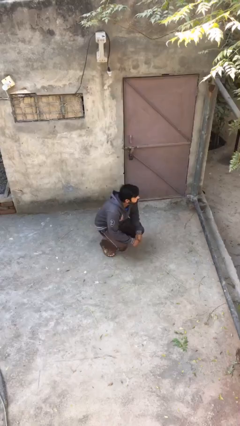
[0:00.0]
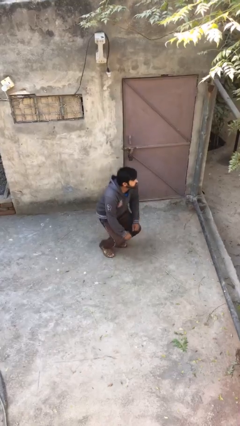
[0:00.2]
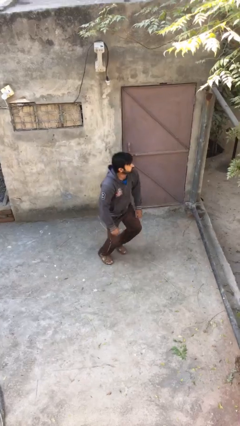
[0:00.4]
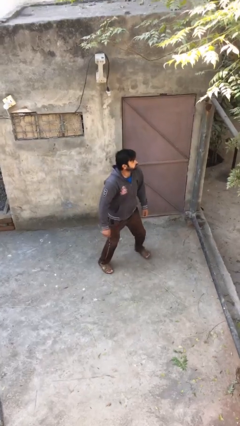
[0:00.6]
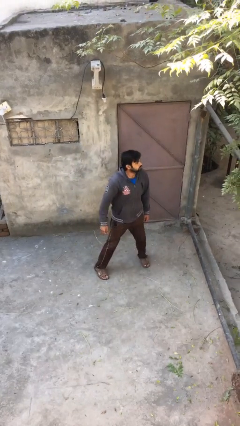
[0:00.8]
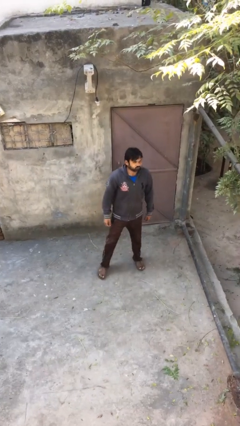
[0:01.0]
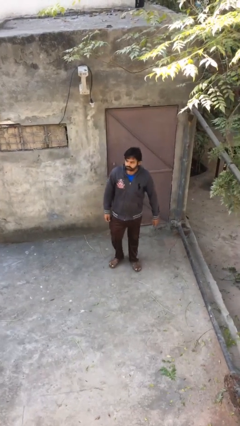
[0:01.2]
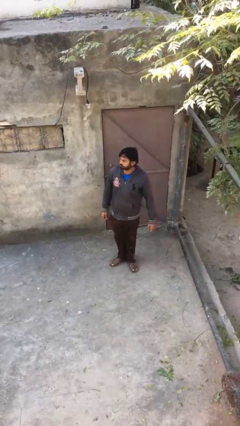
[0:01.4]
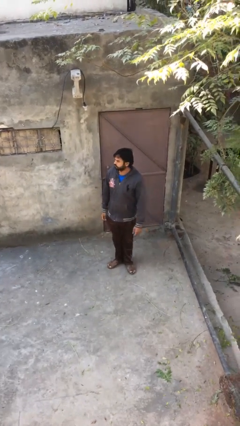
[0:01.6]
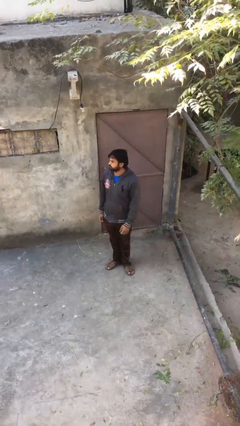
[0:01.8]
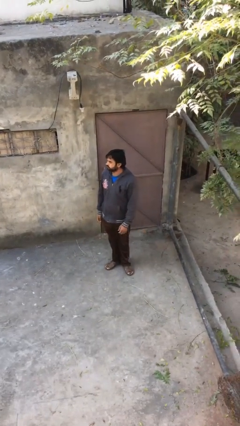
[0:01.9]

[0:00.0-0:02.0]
person stands up

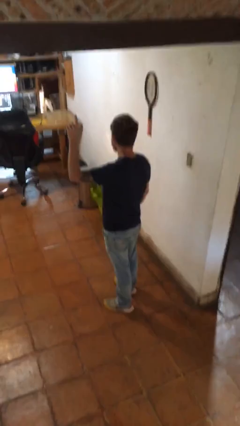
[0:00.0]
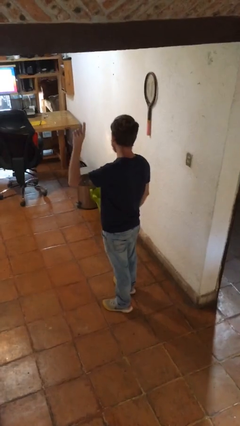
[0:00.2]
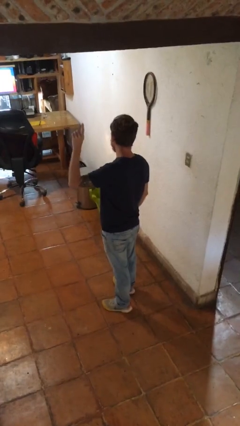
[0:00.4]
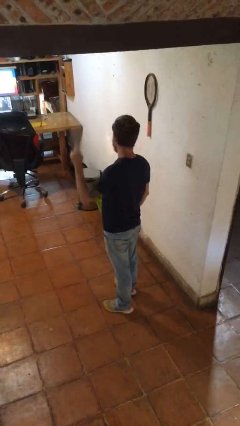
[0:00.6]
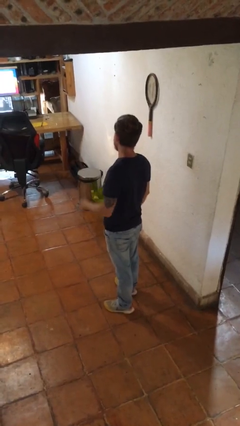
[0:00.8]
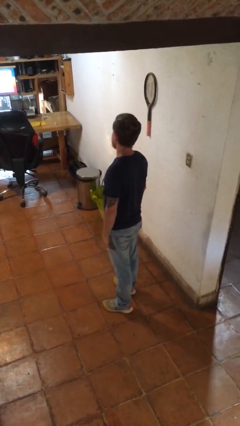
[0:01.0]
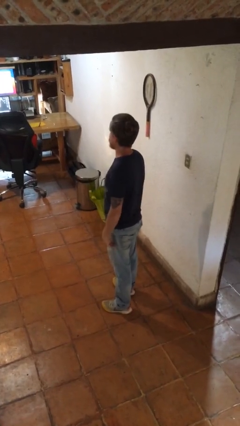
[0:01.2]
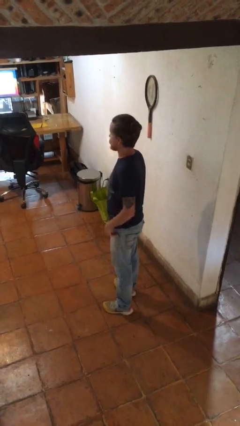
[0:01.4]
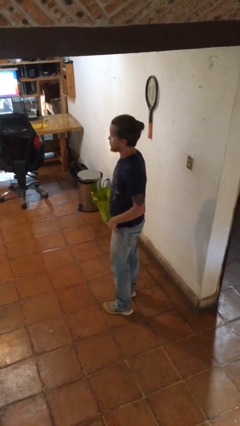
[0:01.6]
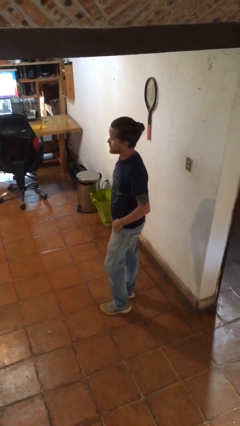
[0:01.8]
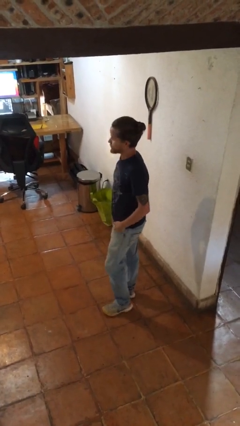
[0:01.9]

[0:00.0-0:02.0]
person gestures lower hand

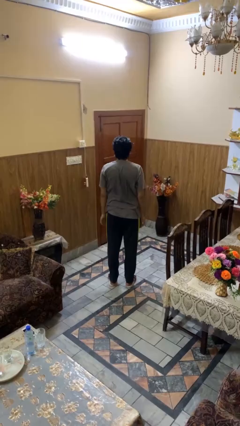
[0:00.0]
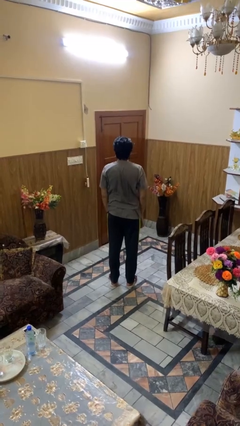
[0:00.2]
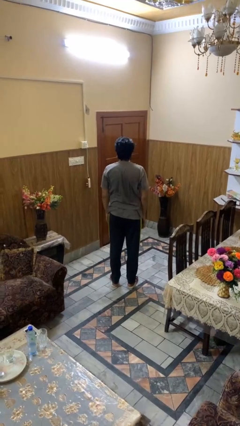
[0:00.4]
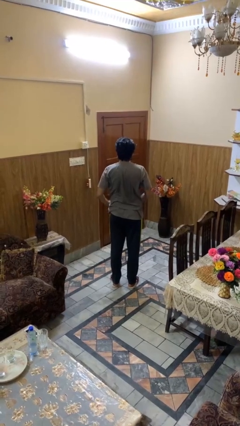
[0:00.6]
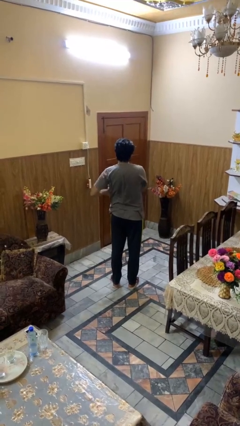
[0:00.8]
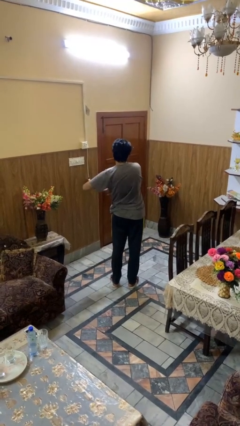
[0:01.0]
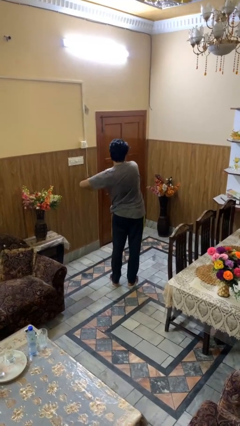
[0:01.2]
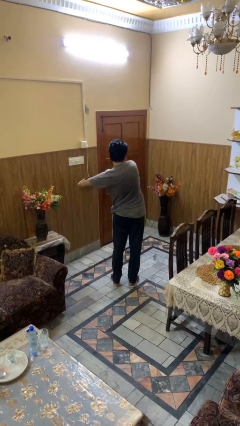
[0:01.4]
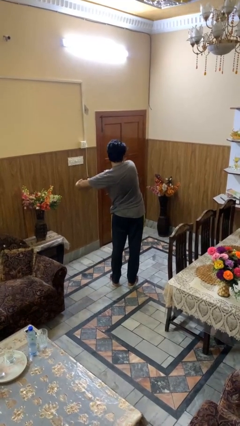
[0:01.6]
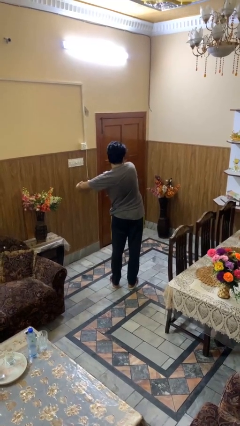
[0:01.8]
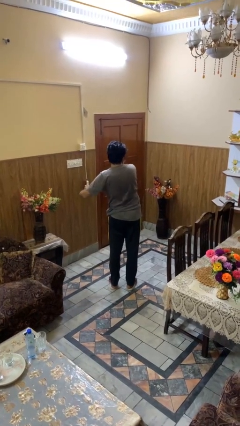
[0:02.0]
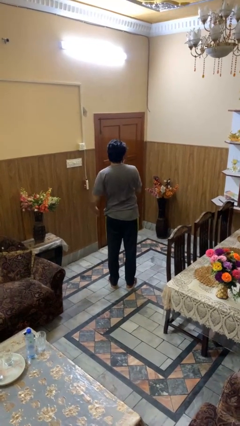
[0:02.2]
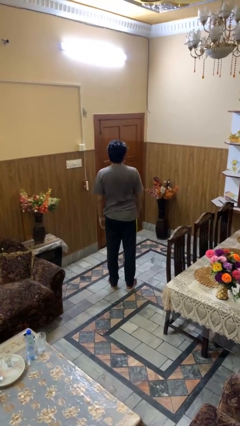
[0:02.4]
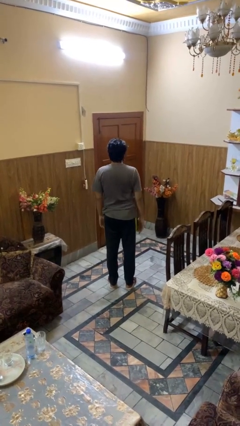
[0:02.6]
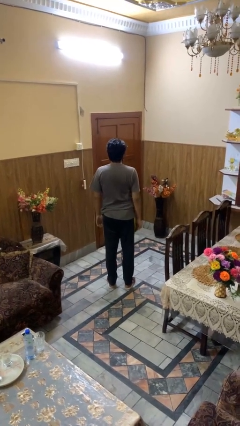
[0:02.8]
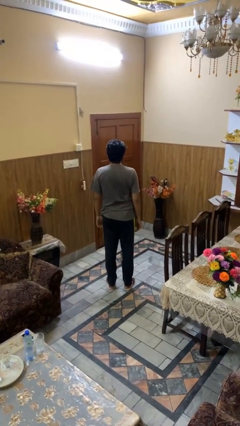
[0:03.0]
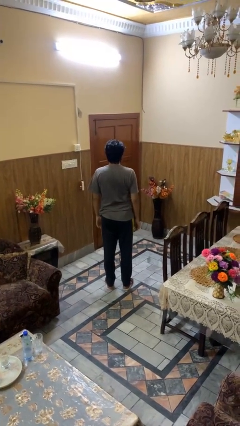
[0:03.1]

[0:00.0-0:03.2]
person stretches arms to side

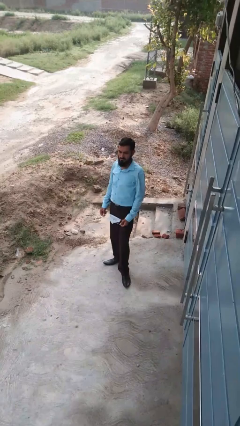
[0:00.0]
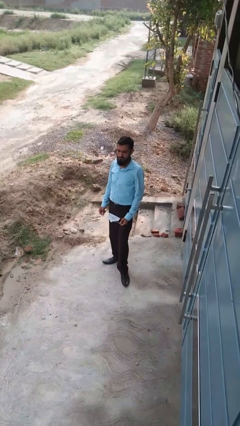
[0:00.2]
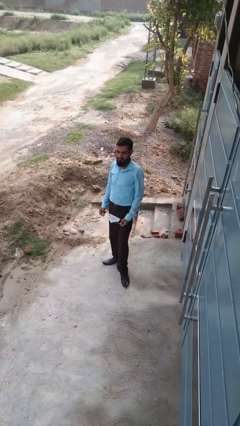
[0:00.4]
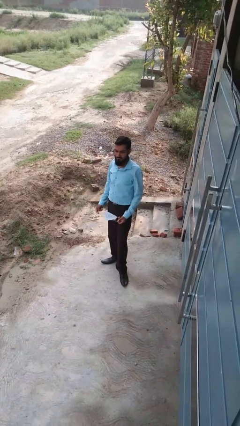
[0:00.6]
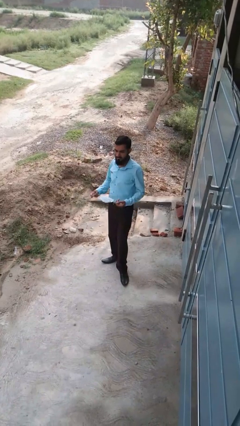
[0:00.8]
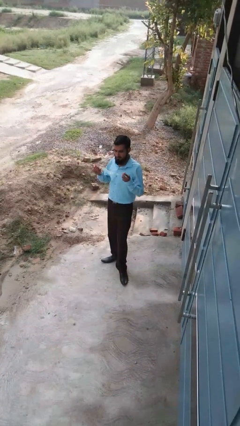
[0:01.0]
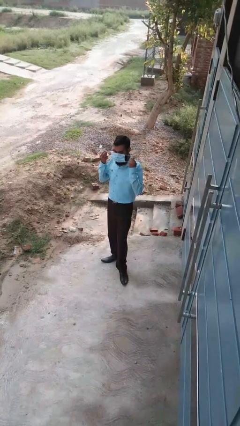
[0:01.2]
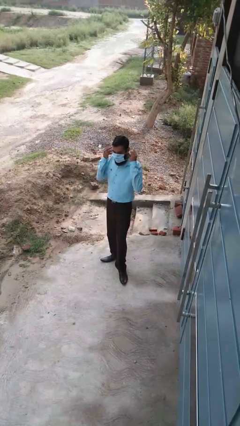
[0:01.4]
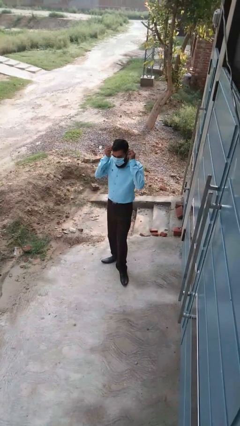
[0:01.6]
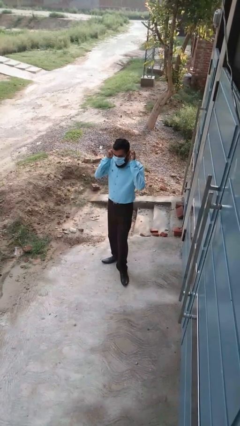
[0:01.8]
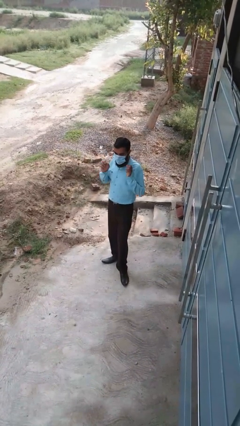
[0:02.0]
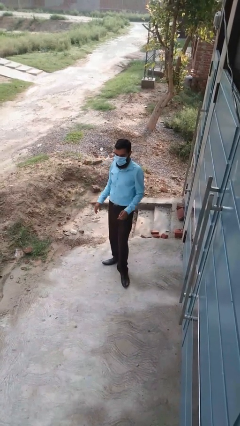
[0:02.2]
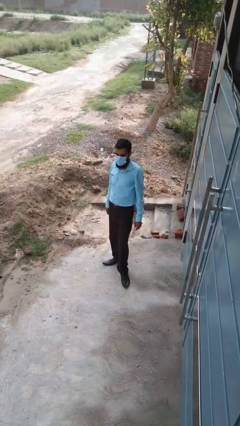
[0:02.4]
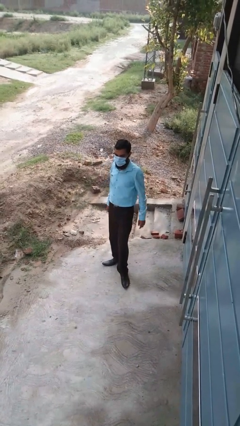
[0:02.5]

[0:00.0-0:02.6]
person puts on facemask

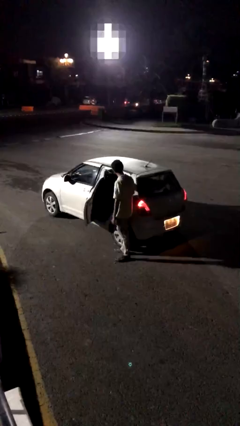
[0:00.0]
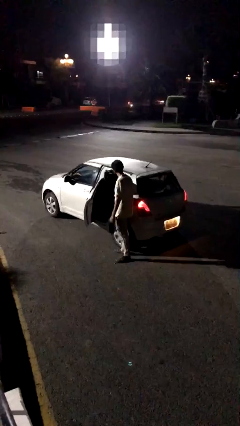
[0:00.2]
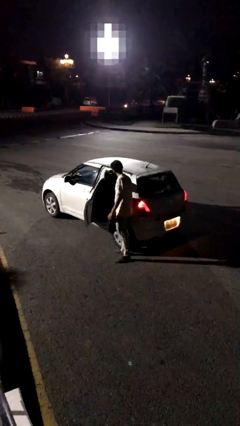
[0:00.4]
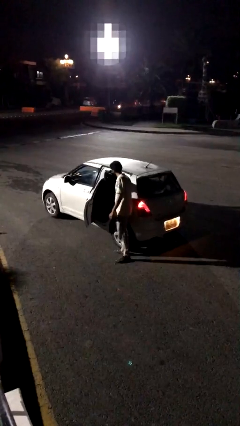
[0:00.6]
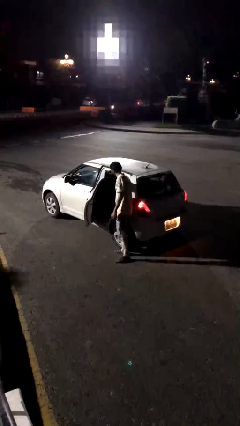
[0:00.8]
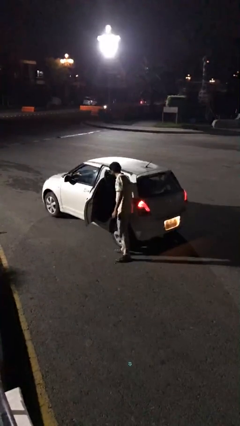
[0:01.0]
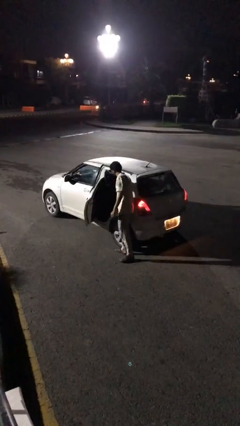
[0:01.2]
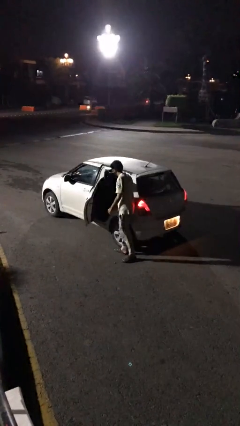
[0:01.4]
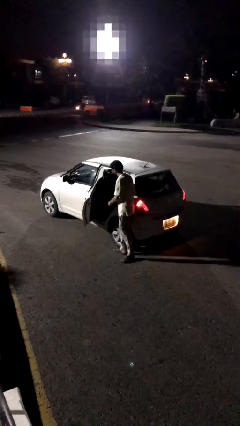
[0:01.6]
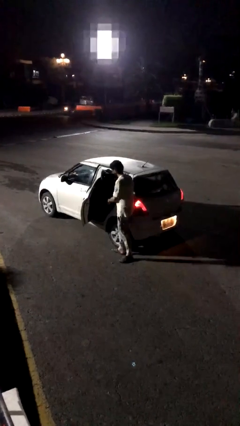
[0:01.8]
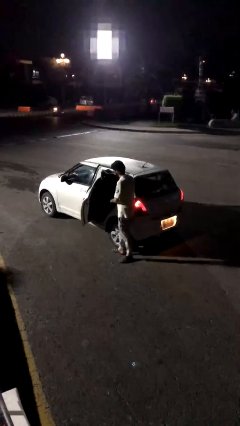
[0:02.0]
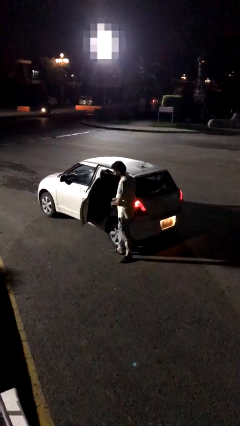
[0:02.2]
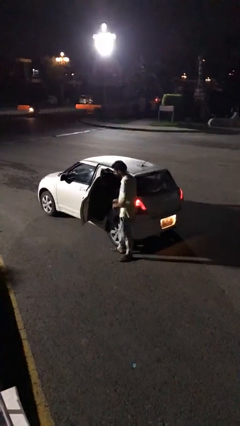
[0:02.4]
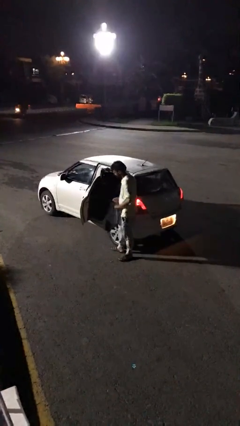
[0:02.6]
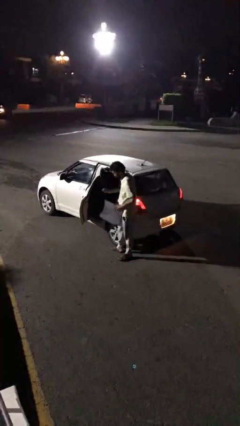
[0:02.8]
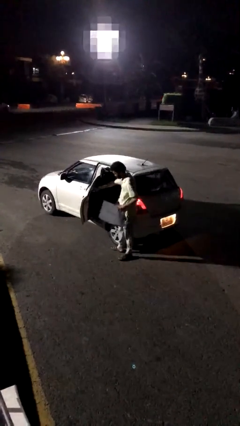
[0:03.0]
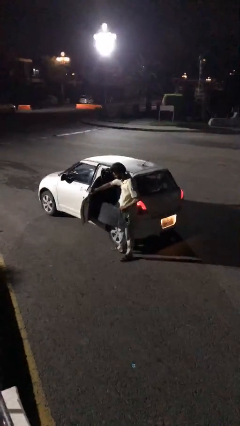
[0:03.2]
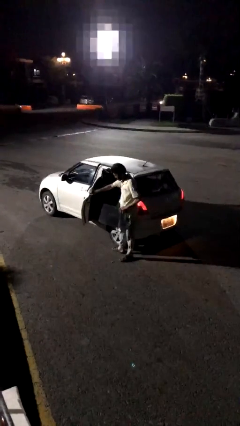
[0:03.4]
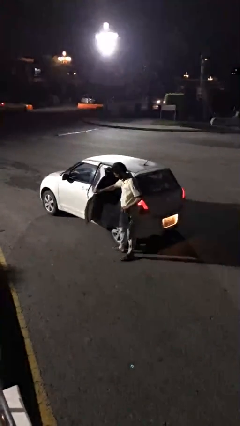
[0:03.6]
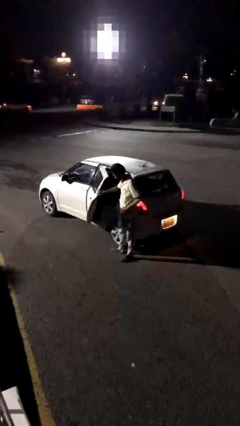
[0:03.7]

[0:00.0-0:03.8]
person unloads car

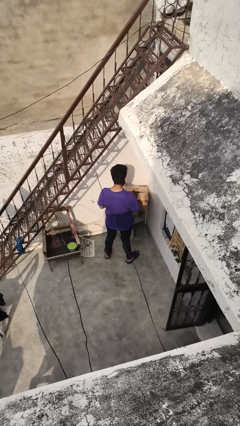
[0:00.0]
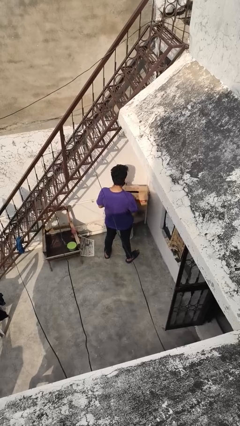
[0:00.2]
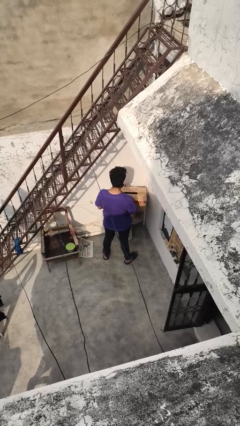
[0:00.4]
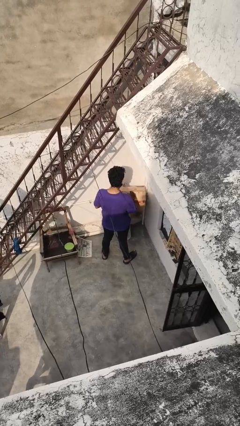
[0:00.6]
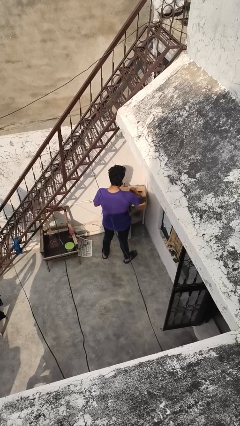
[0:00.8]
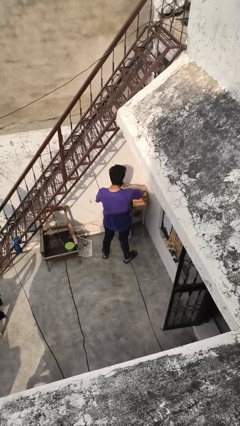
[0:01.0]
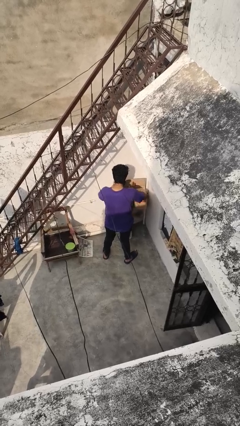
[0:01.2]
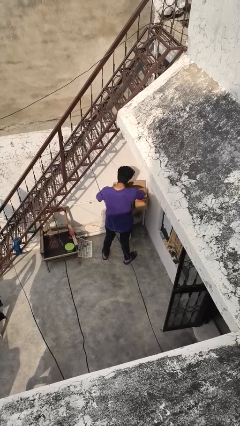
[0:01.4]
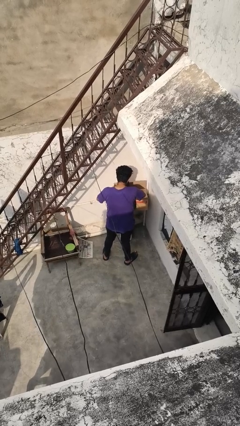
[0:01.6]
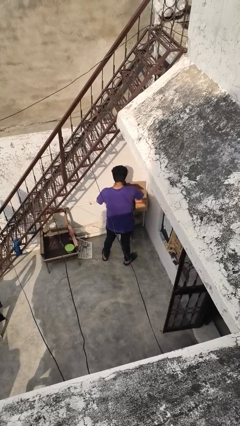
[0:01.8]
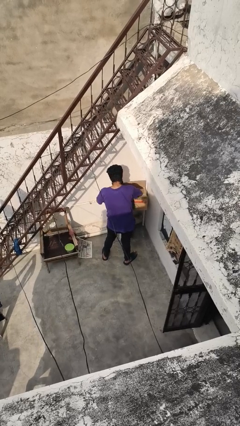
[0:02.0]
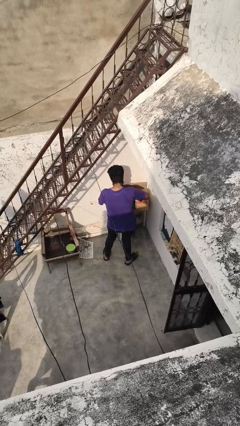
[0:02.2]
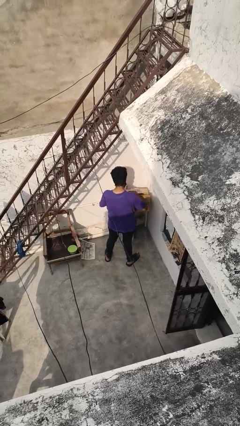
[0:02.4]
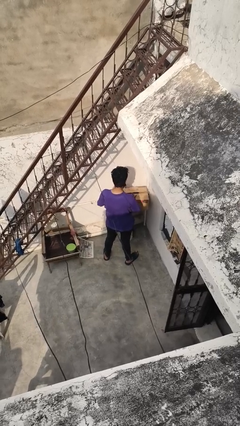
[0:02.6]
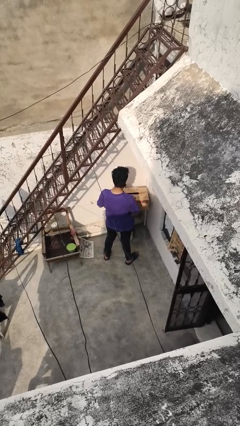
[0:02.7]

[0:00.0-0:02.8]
person searches in box

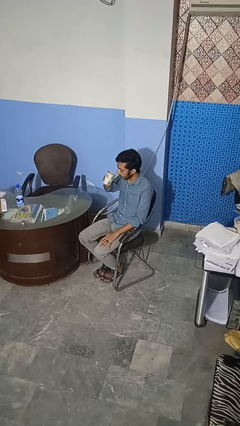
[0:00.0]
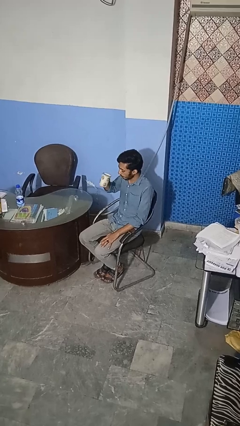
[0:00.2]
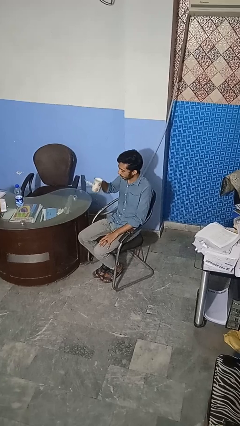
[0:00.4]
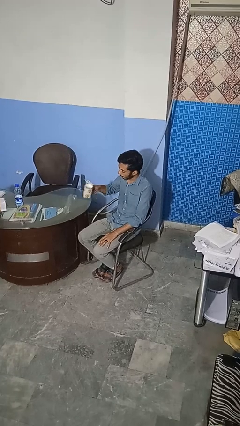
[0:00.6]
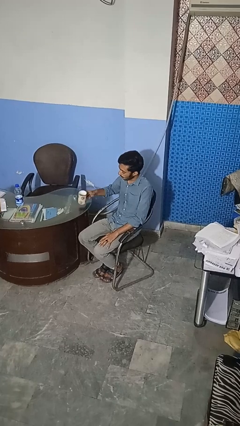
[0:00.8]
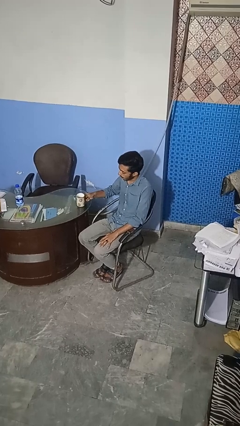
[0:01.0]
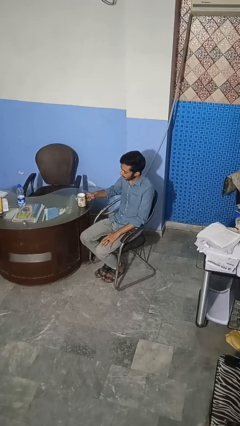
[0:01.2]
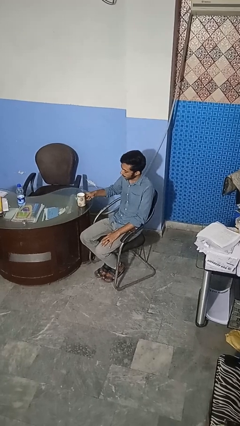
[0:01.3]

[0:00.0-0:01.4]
person puts down object on table
